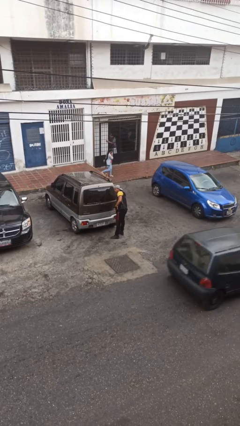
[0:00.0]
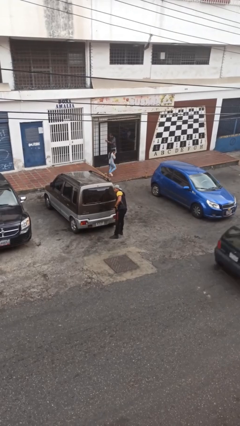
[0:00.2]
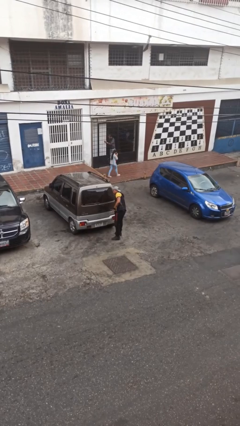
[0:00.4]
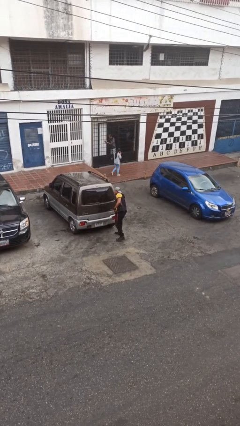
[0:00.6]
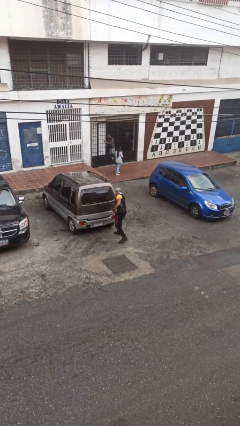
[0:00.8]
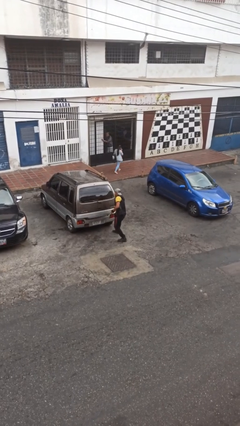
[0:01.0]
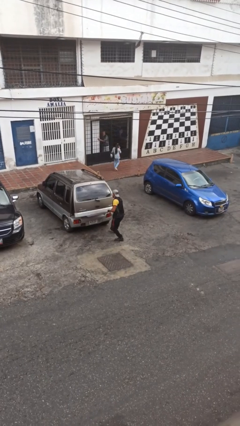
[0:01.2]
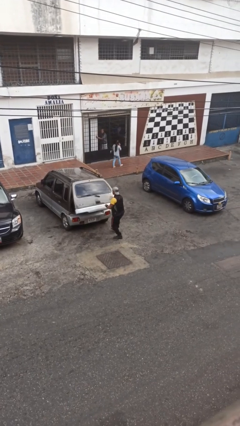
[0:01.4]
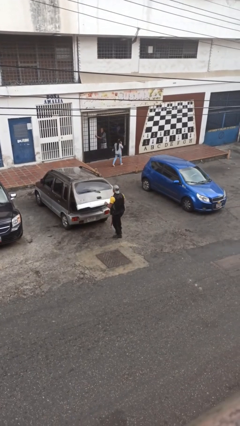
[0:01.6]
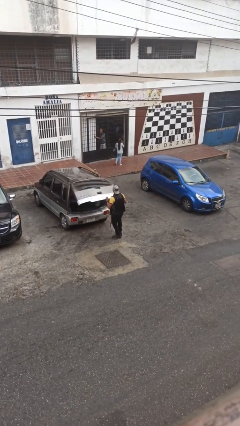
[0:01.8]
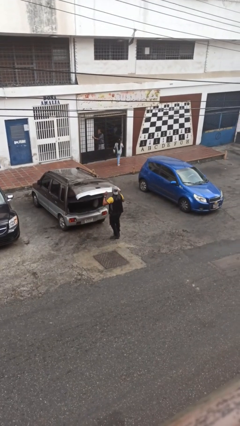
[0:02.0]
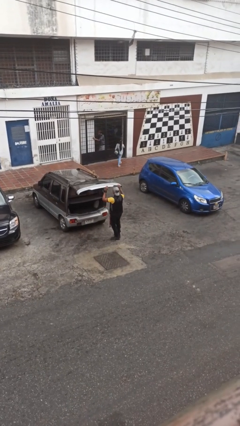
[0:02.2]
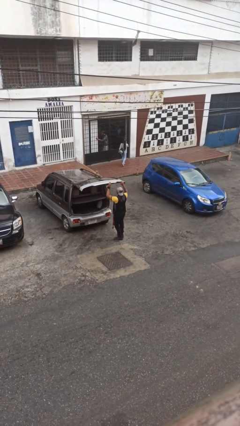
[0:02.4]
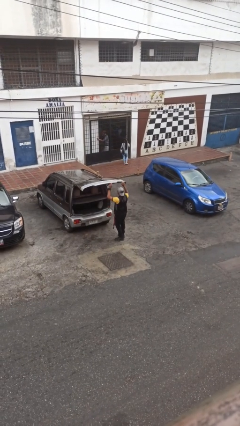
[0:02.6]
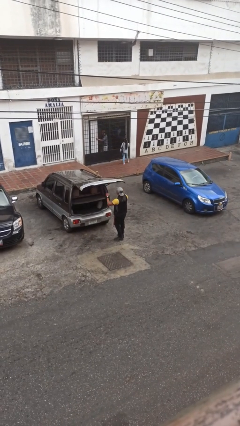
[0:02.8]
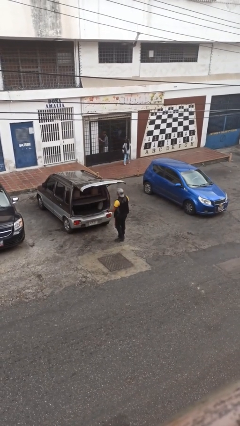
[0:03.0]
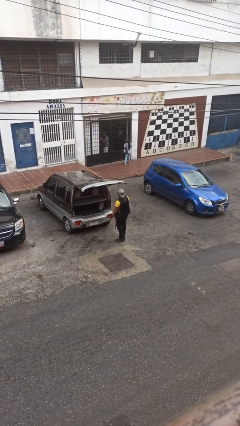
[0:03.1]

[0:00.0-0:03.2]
person opens car trunk

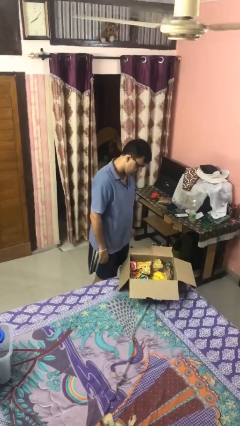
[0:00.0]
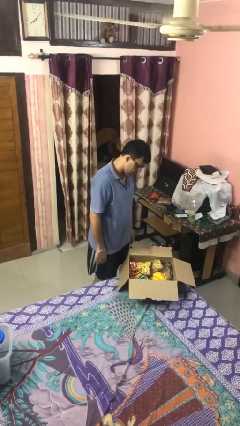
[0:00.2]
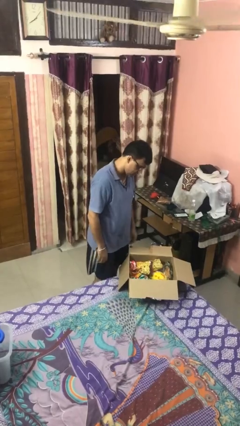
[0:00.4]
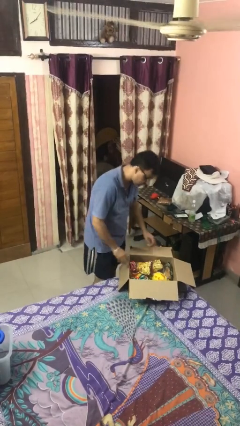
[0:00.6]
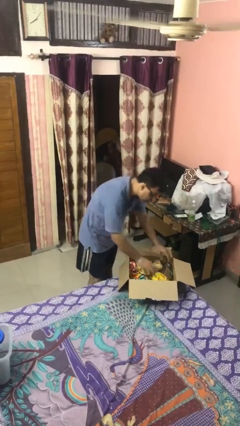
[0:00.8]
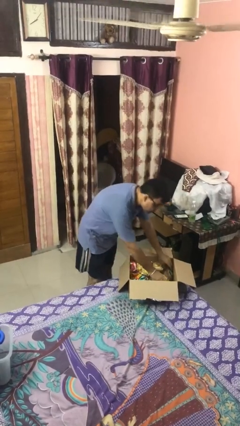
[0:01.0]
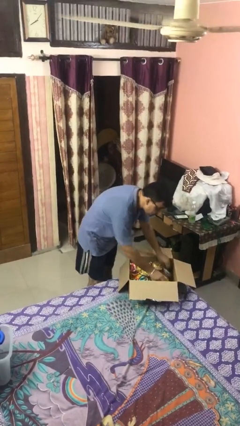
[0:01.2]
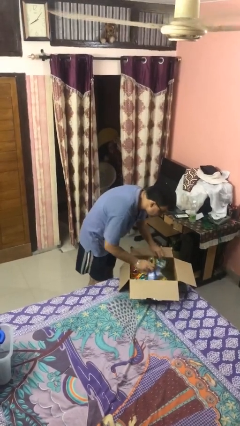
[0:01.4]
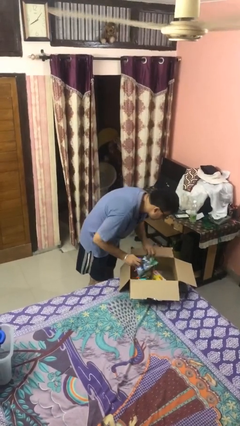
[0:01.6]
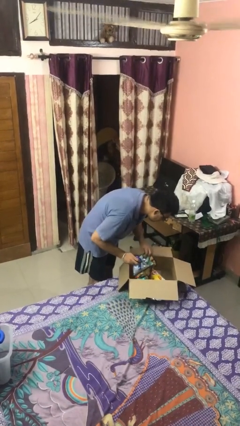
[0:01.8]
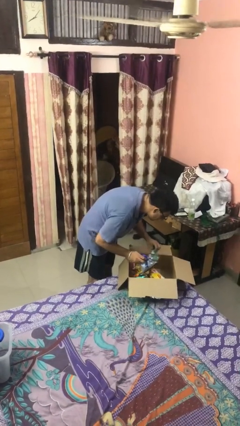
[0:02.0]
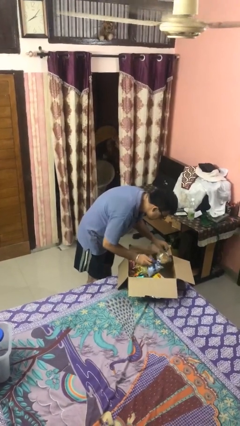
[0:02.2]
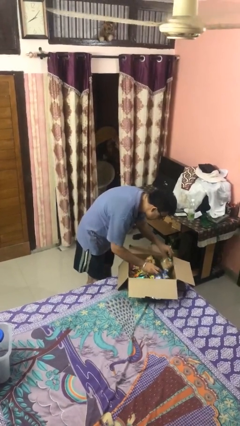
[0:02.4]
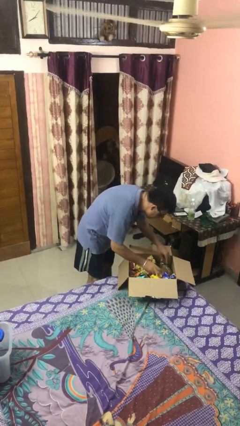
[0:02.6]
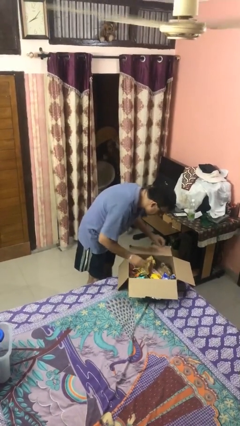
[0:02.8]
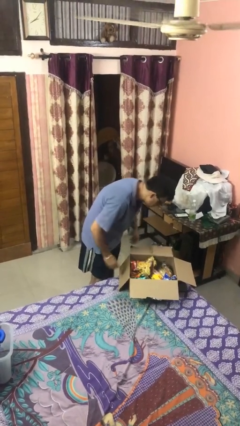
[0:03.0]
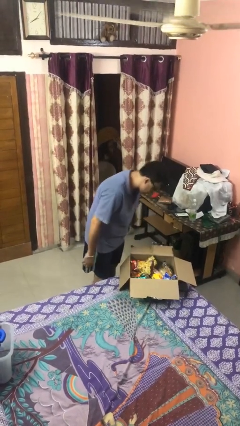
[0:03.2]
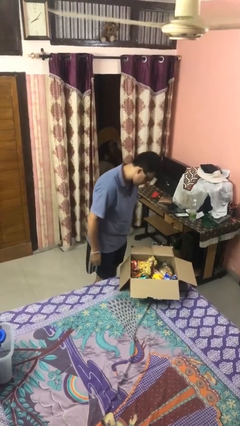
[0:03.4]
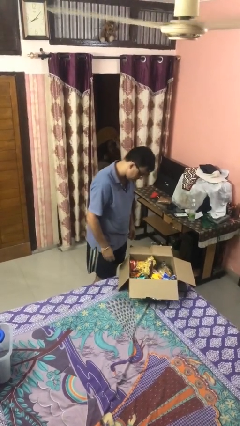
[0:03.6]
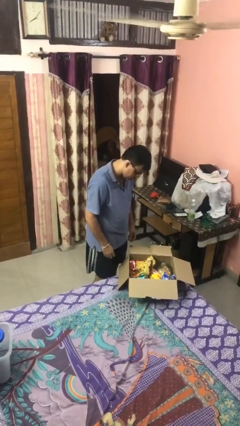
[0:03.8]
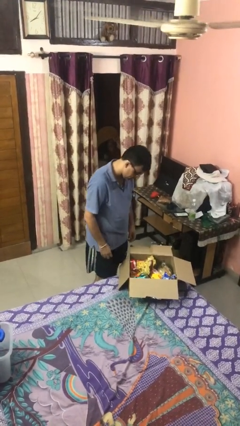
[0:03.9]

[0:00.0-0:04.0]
person searches in box

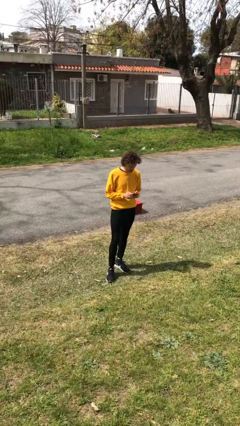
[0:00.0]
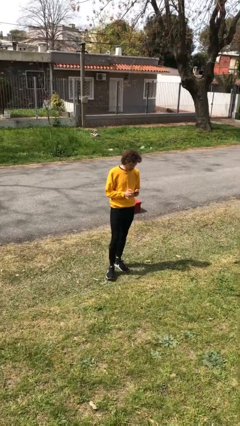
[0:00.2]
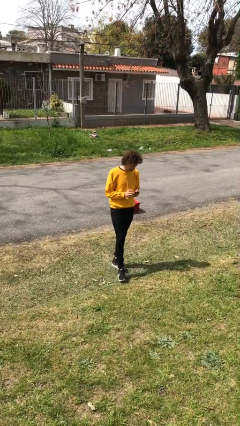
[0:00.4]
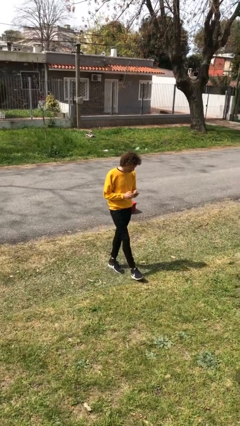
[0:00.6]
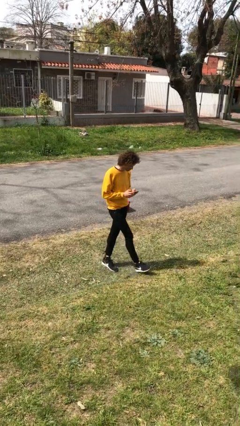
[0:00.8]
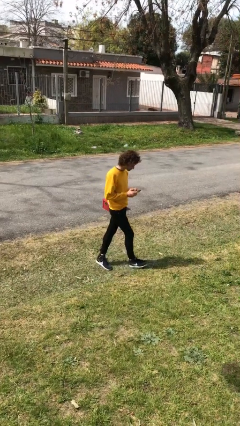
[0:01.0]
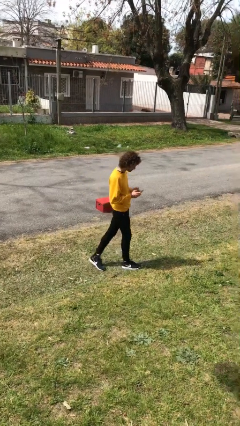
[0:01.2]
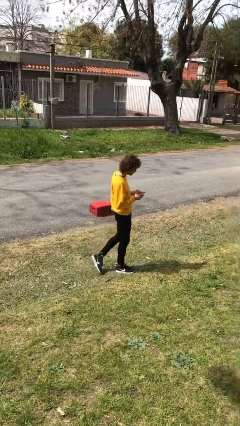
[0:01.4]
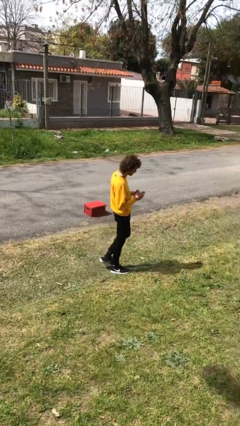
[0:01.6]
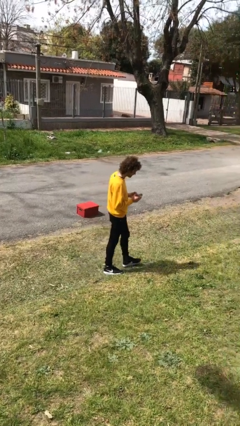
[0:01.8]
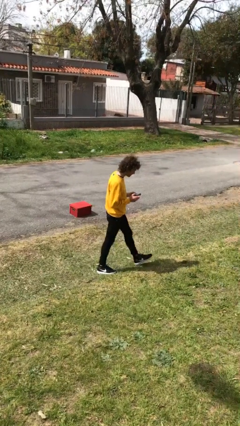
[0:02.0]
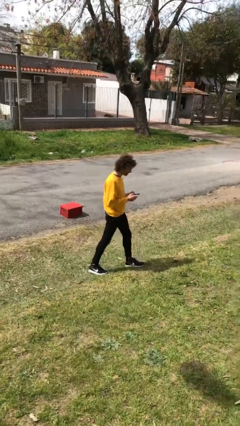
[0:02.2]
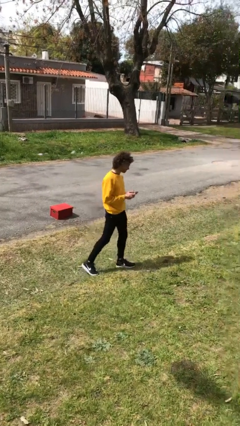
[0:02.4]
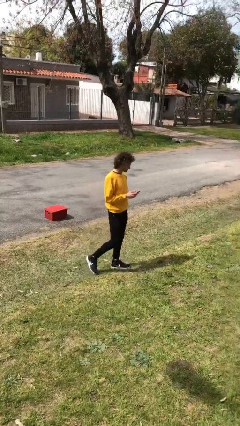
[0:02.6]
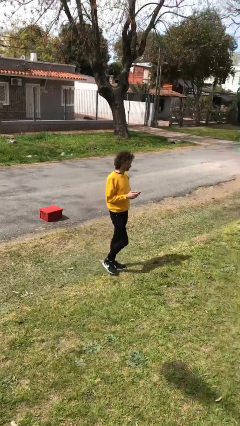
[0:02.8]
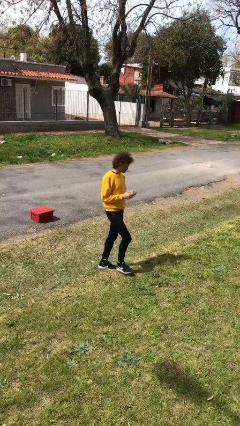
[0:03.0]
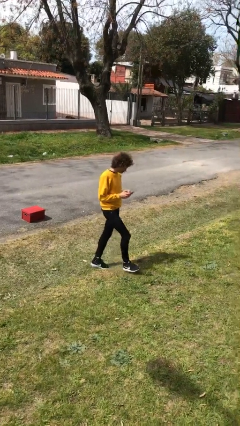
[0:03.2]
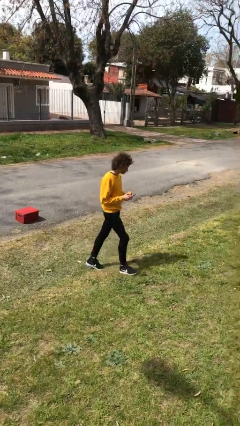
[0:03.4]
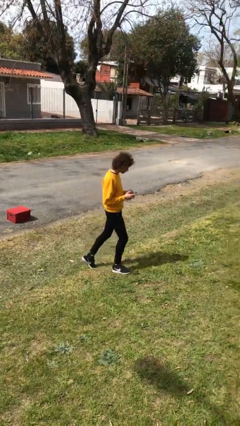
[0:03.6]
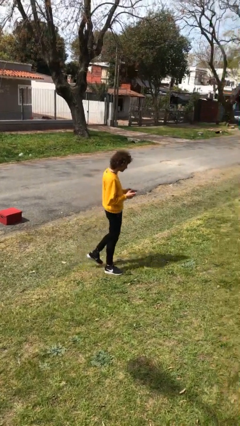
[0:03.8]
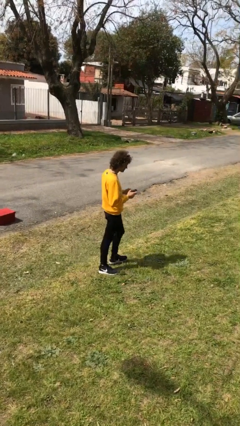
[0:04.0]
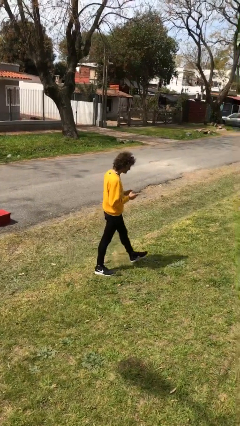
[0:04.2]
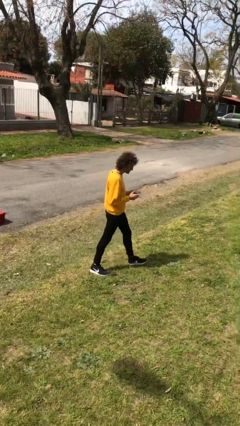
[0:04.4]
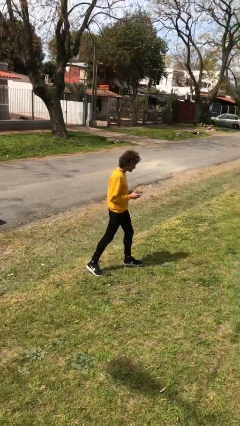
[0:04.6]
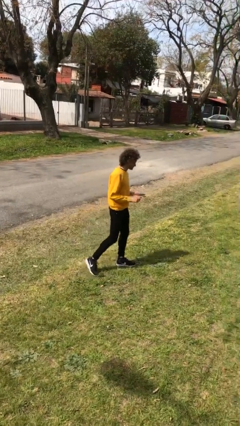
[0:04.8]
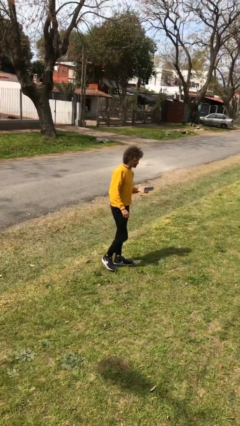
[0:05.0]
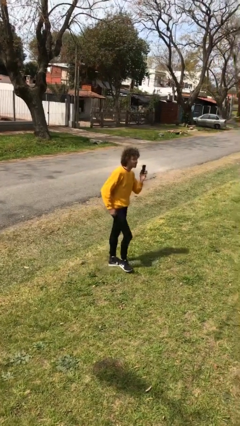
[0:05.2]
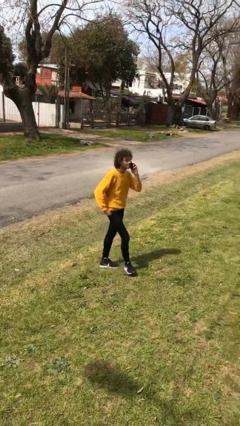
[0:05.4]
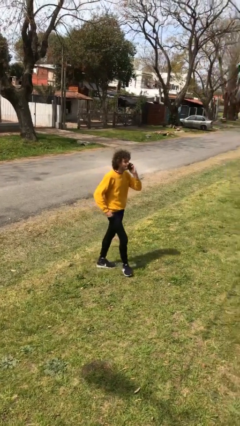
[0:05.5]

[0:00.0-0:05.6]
person texts on phone

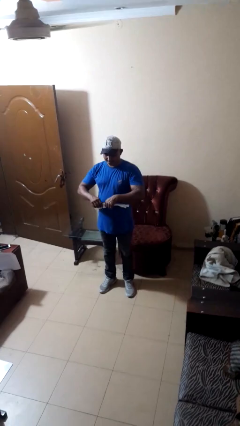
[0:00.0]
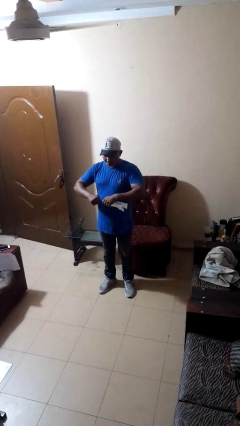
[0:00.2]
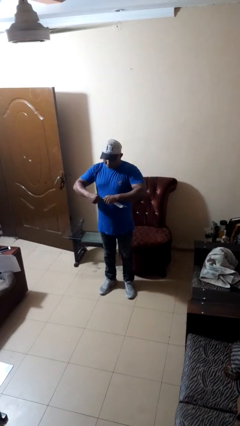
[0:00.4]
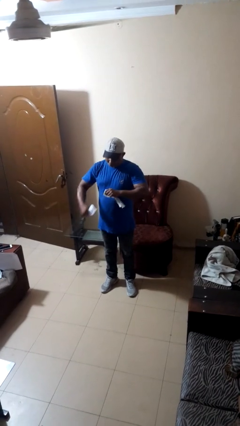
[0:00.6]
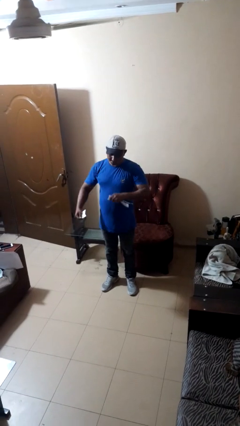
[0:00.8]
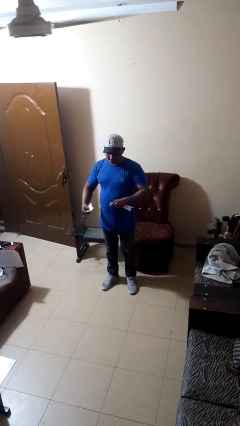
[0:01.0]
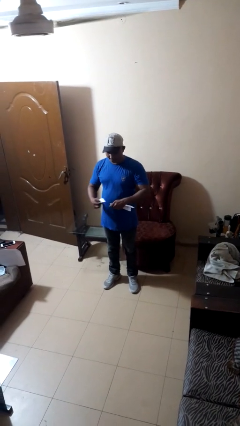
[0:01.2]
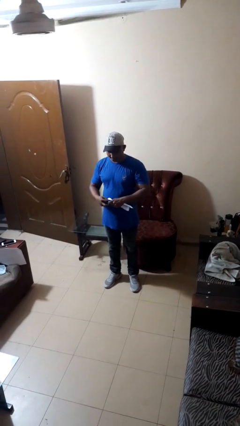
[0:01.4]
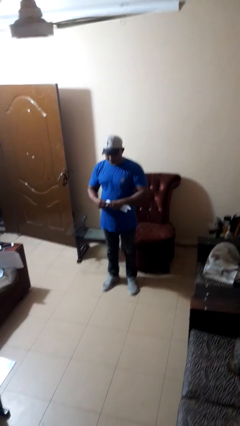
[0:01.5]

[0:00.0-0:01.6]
person tears paper

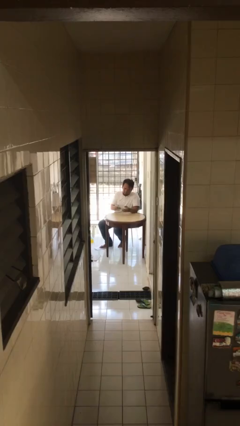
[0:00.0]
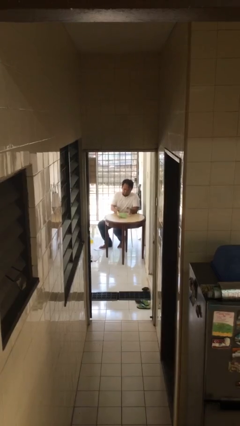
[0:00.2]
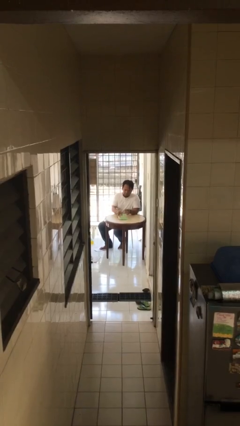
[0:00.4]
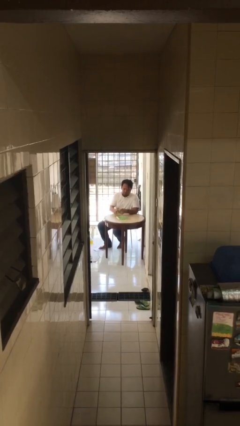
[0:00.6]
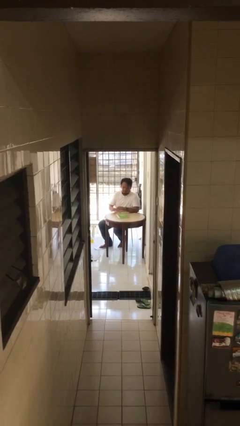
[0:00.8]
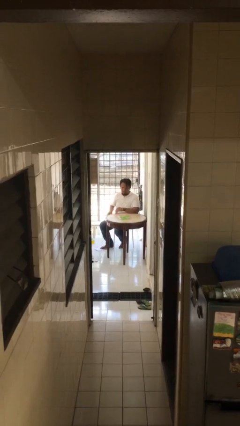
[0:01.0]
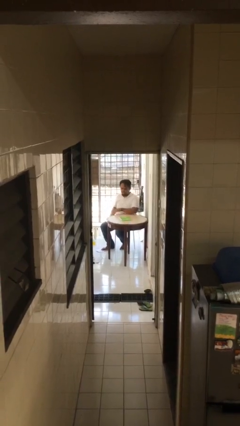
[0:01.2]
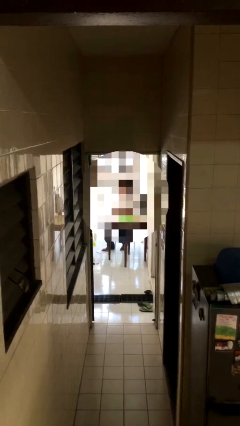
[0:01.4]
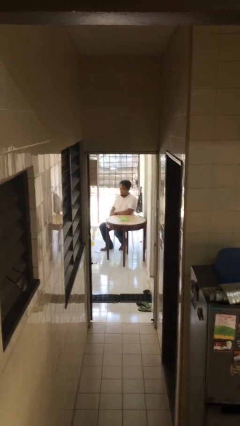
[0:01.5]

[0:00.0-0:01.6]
person puts down object on table

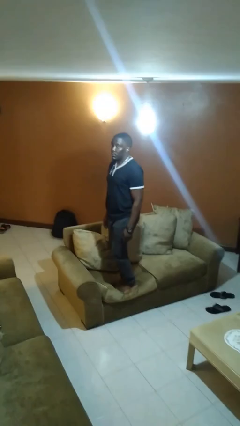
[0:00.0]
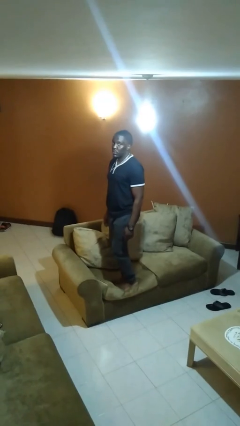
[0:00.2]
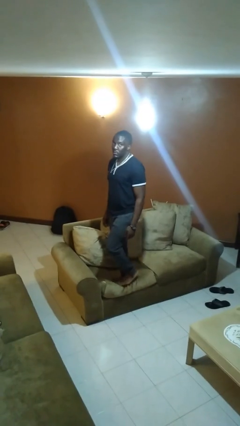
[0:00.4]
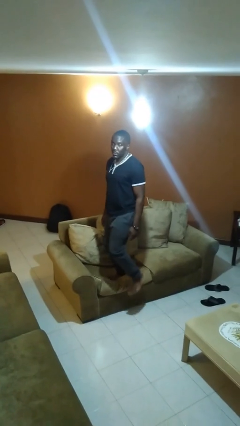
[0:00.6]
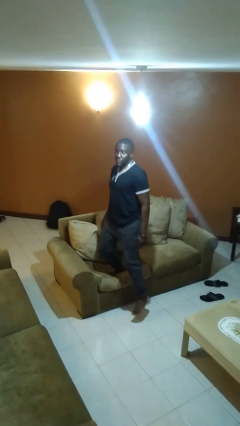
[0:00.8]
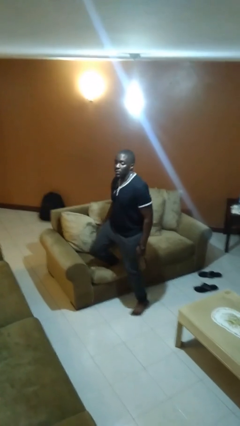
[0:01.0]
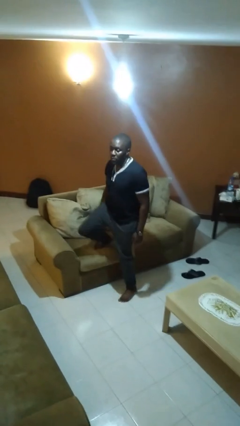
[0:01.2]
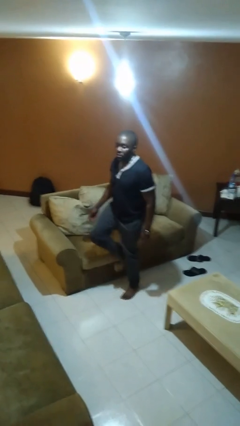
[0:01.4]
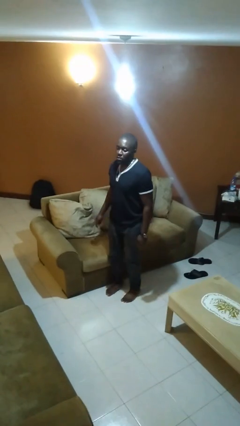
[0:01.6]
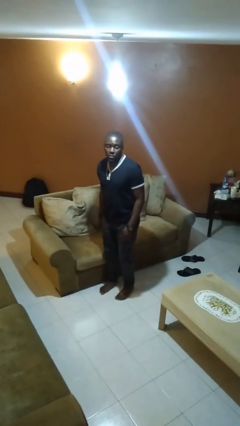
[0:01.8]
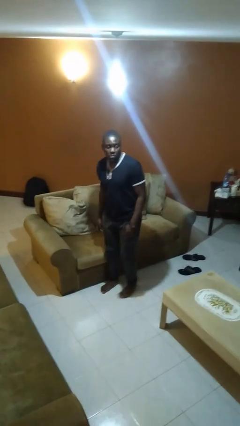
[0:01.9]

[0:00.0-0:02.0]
person climbs off couch
